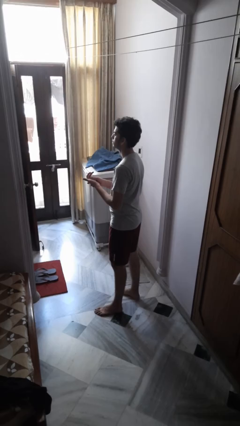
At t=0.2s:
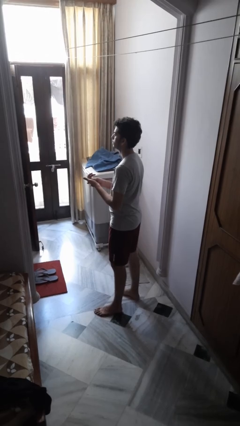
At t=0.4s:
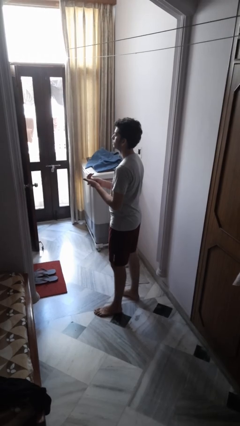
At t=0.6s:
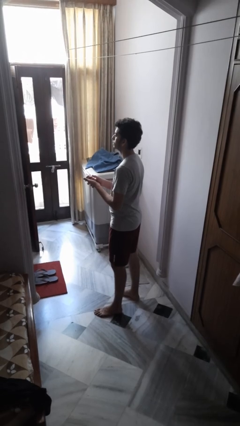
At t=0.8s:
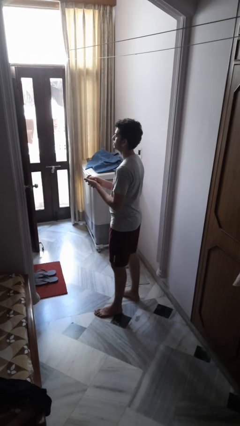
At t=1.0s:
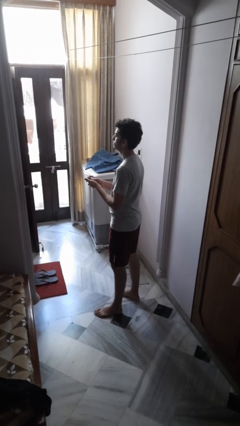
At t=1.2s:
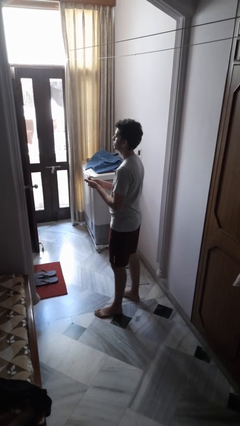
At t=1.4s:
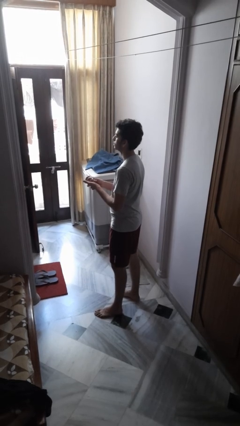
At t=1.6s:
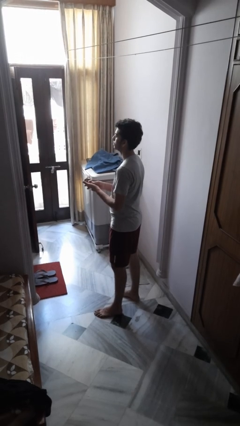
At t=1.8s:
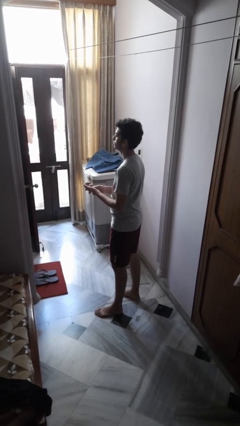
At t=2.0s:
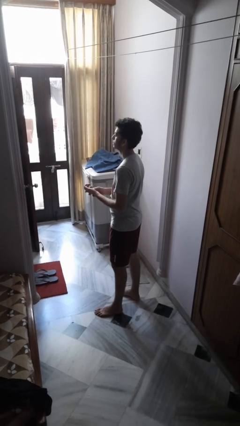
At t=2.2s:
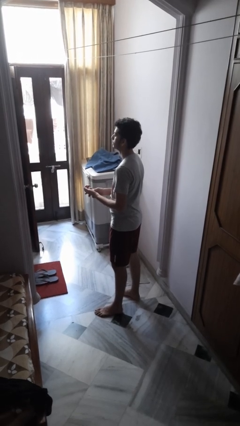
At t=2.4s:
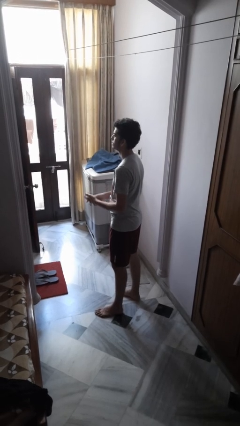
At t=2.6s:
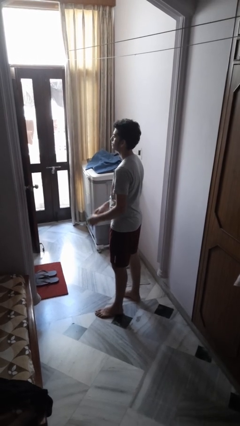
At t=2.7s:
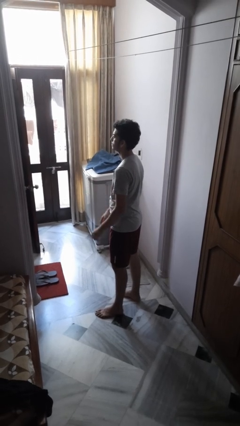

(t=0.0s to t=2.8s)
person cracks knuckles

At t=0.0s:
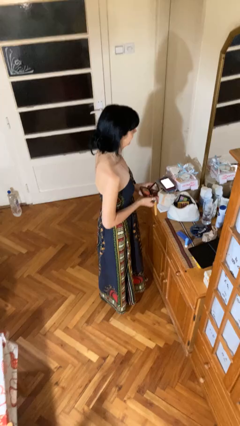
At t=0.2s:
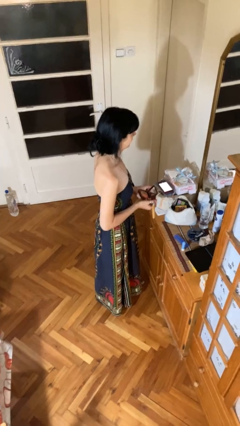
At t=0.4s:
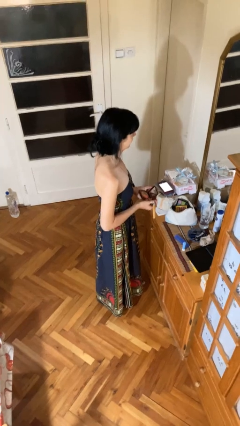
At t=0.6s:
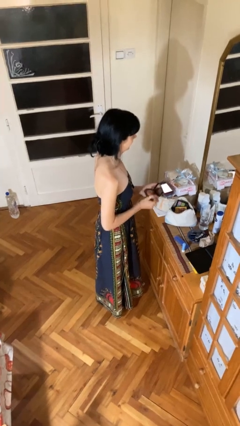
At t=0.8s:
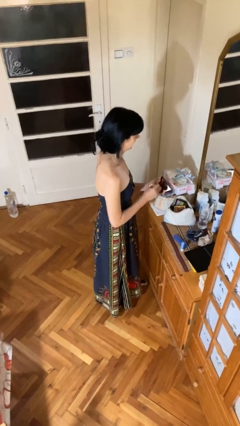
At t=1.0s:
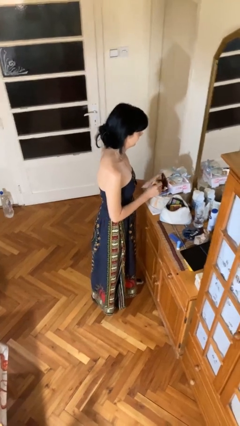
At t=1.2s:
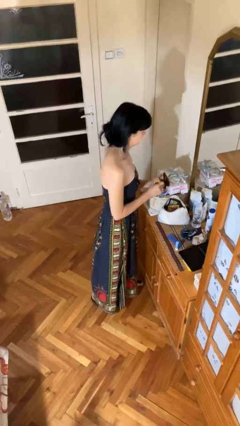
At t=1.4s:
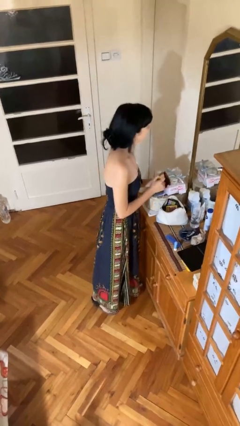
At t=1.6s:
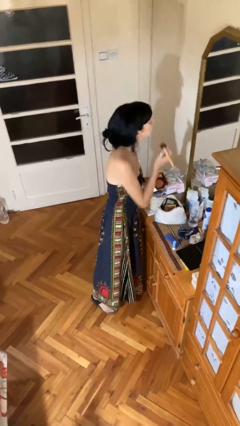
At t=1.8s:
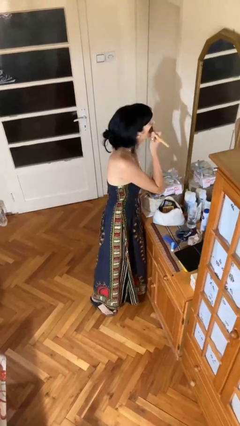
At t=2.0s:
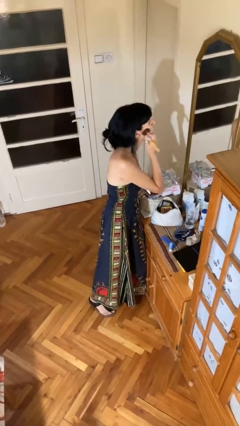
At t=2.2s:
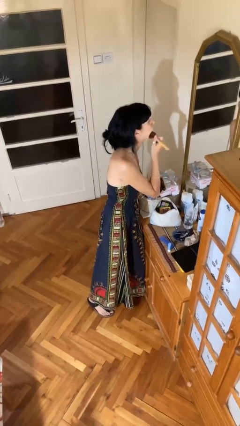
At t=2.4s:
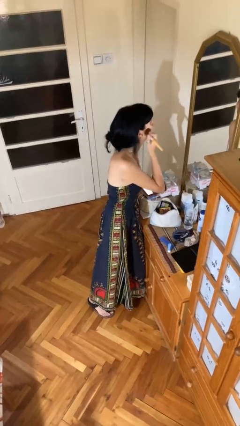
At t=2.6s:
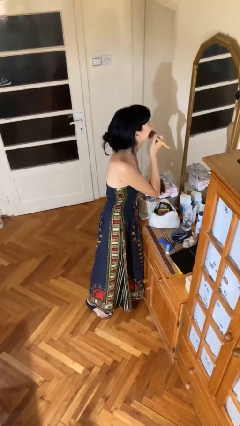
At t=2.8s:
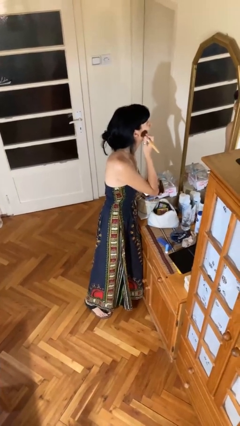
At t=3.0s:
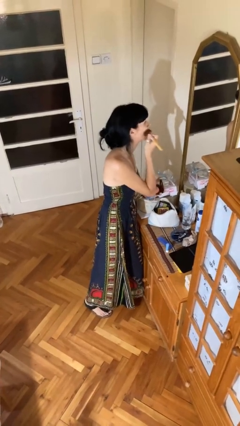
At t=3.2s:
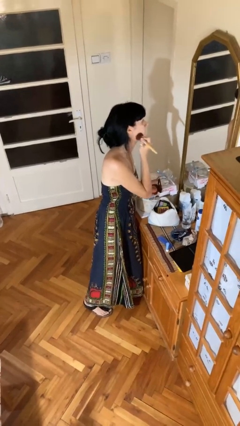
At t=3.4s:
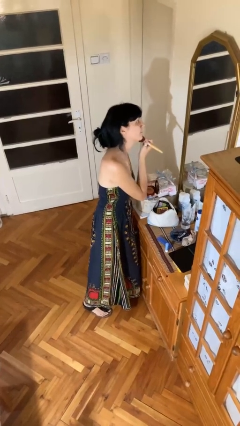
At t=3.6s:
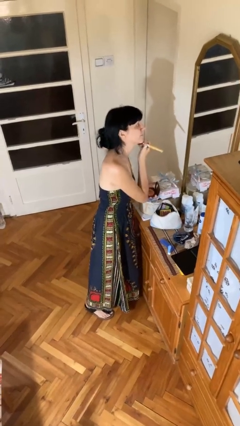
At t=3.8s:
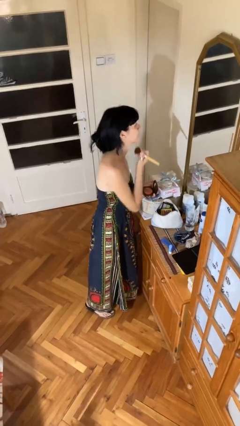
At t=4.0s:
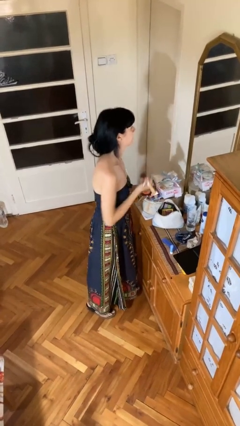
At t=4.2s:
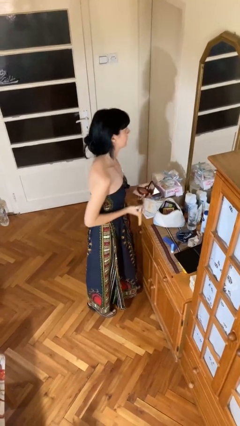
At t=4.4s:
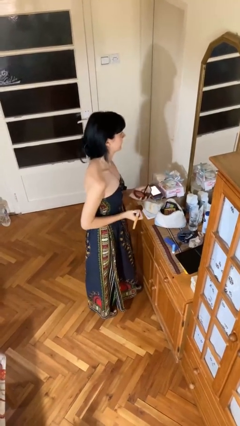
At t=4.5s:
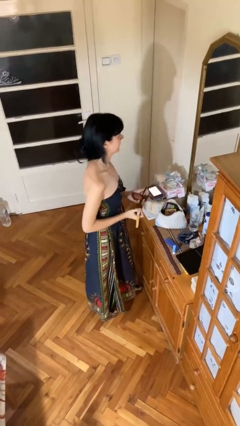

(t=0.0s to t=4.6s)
person applies foundation makeup

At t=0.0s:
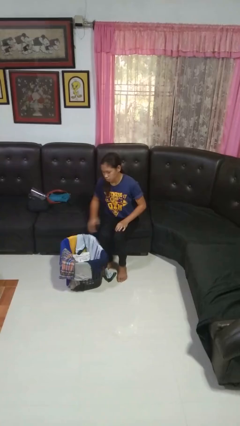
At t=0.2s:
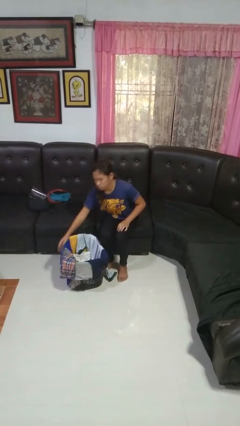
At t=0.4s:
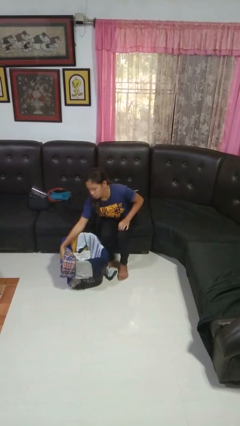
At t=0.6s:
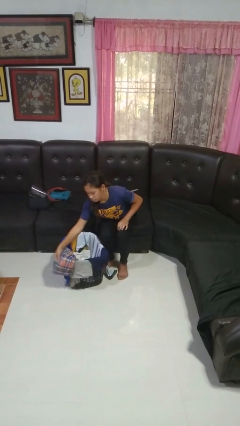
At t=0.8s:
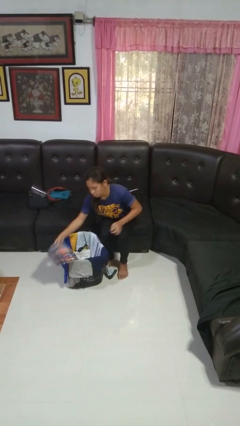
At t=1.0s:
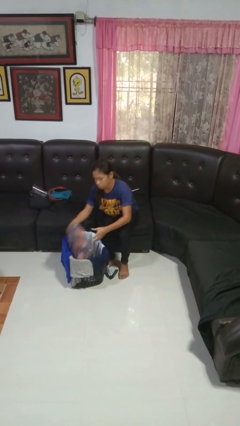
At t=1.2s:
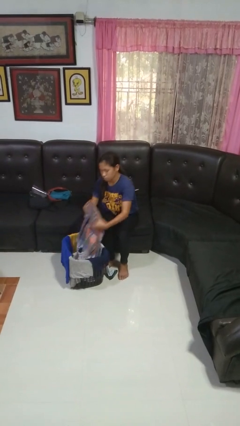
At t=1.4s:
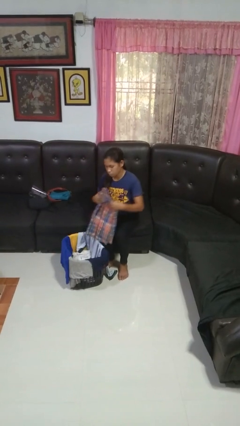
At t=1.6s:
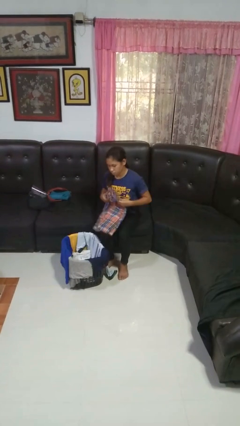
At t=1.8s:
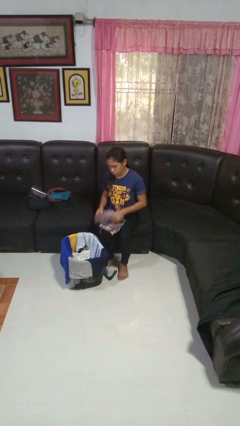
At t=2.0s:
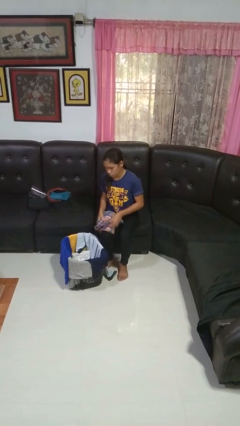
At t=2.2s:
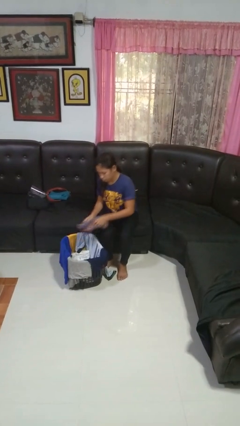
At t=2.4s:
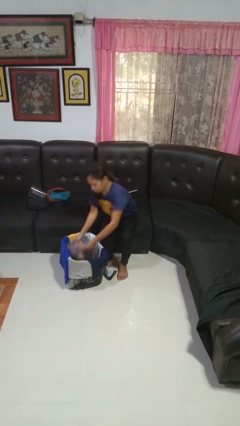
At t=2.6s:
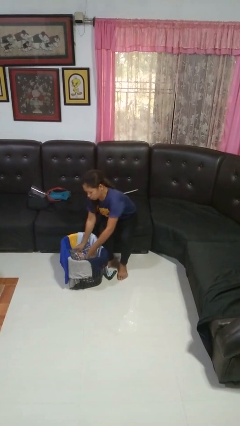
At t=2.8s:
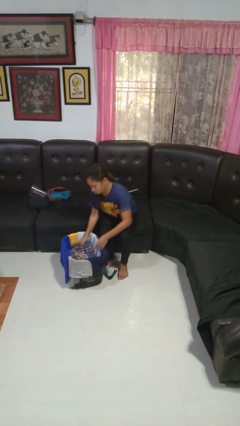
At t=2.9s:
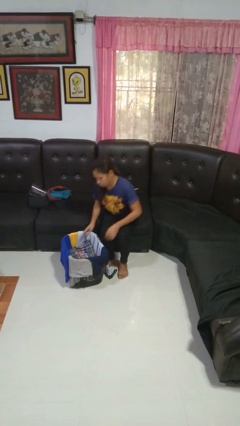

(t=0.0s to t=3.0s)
person folds pants

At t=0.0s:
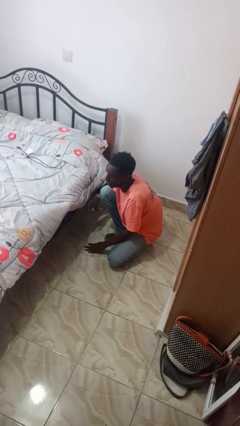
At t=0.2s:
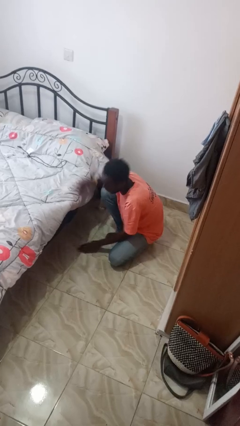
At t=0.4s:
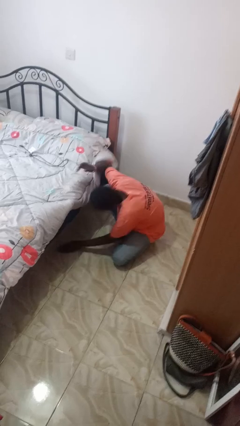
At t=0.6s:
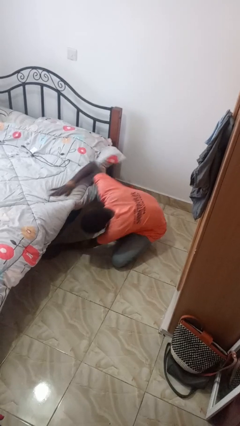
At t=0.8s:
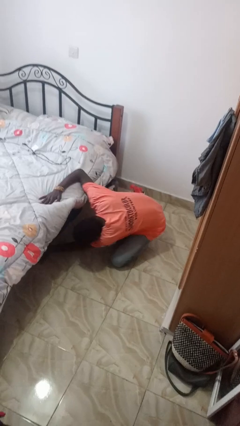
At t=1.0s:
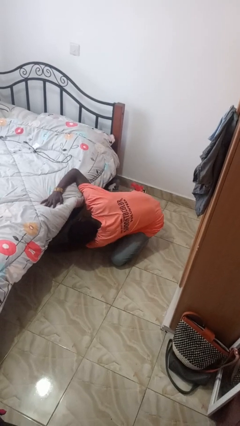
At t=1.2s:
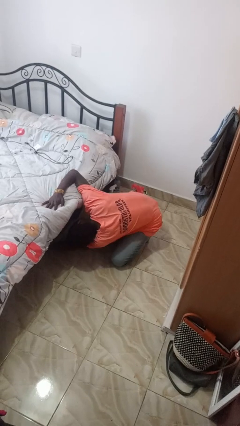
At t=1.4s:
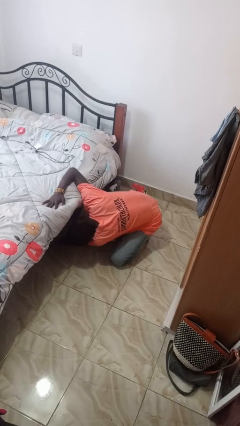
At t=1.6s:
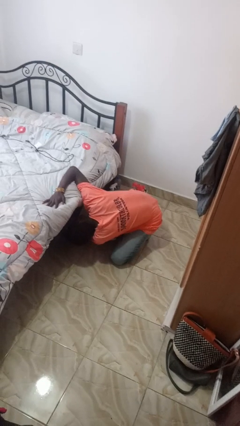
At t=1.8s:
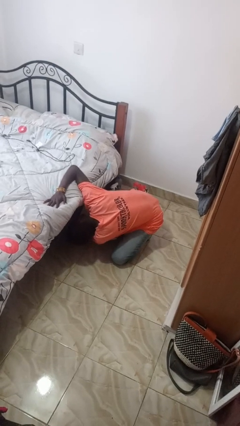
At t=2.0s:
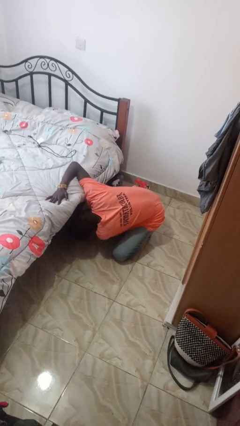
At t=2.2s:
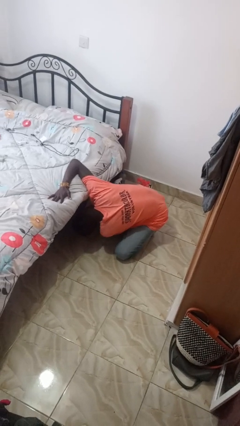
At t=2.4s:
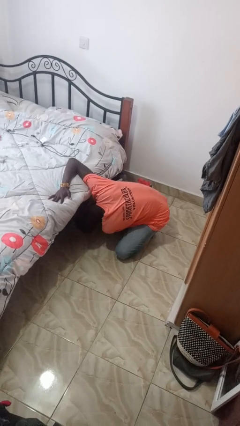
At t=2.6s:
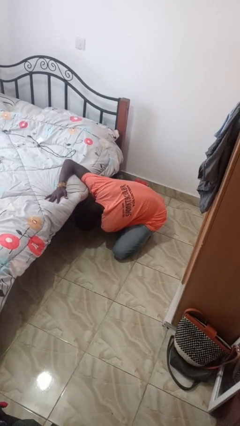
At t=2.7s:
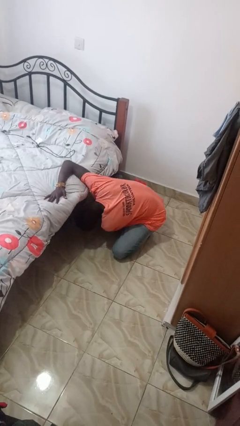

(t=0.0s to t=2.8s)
person searches under bed

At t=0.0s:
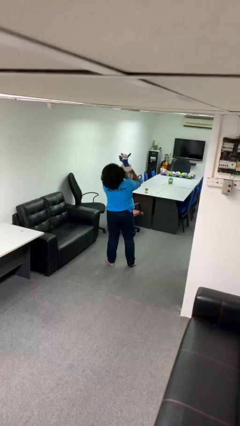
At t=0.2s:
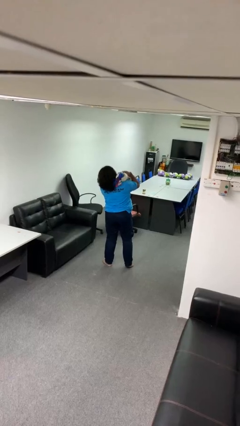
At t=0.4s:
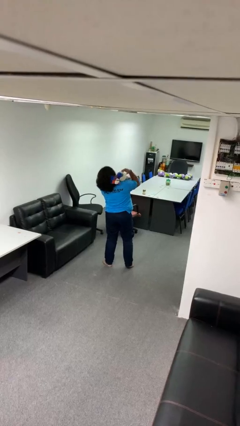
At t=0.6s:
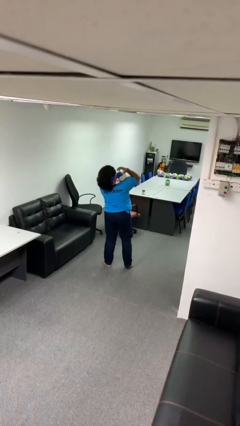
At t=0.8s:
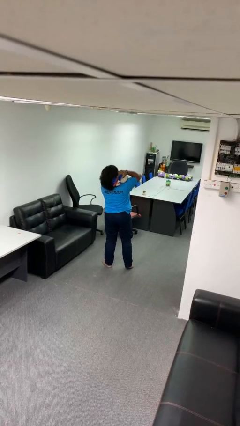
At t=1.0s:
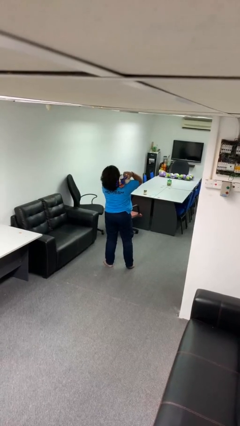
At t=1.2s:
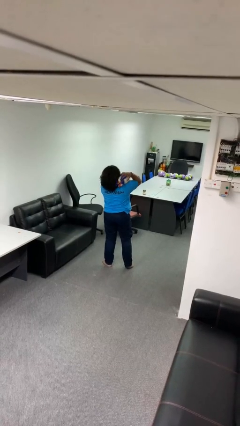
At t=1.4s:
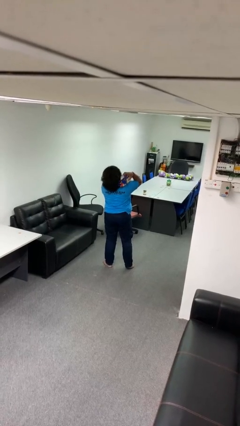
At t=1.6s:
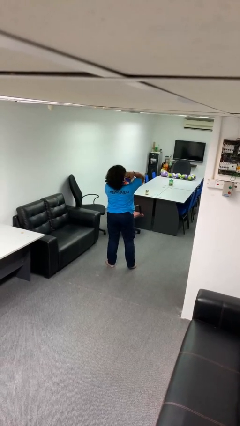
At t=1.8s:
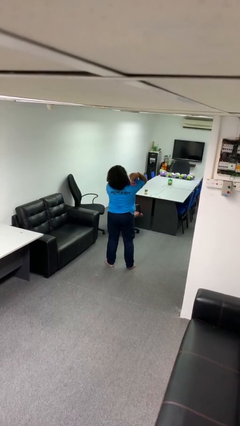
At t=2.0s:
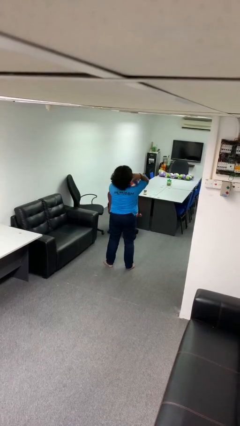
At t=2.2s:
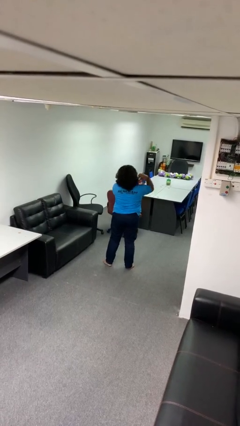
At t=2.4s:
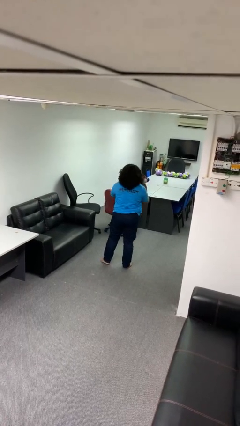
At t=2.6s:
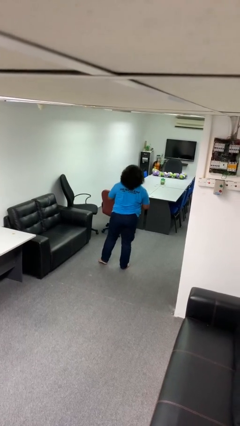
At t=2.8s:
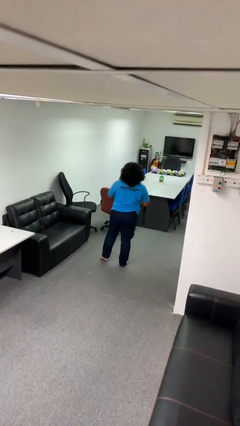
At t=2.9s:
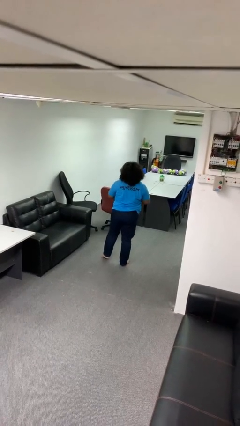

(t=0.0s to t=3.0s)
person hugs stuffed animal

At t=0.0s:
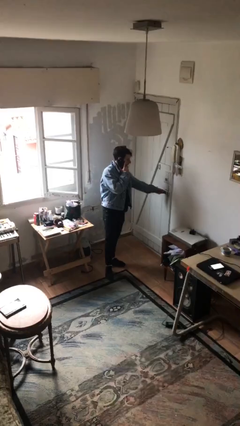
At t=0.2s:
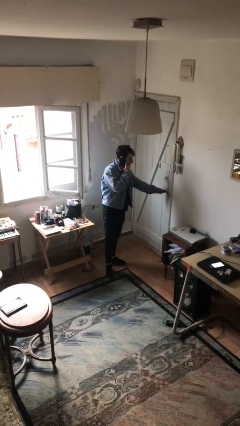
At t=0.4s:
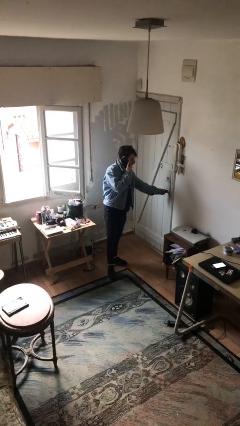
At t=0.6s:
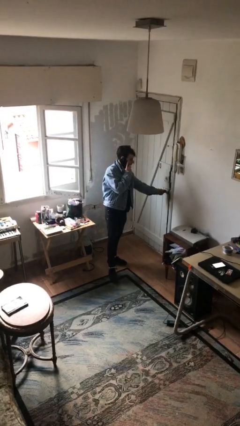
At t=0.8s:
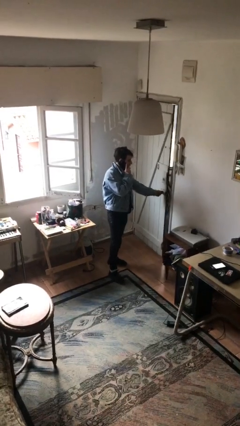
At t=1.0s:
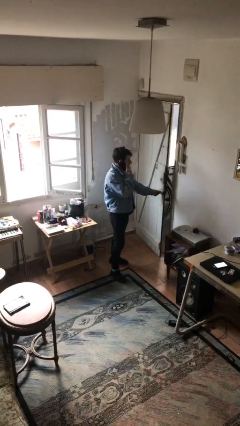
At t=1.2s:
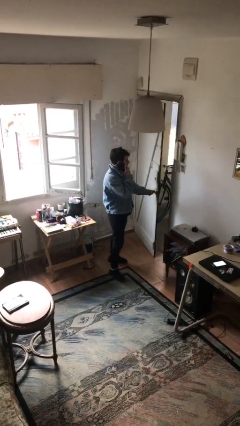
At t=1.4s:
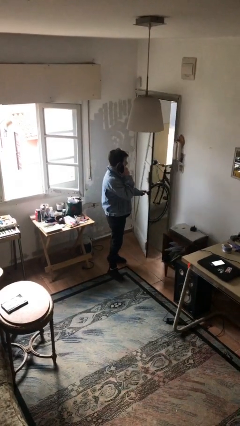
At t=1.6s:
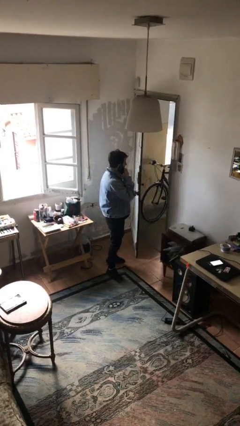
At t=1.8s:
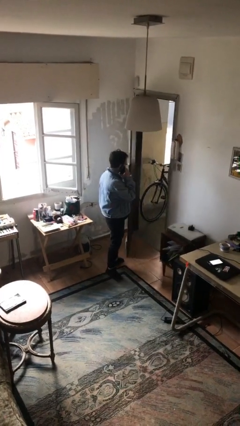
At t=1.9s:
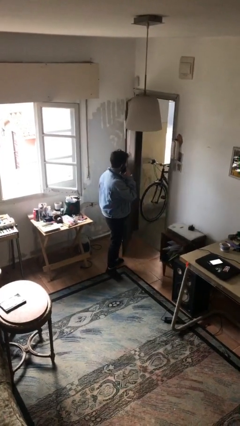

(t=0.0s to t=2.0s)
person opens facility door
